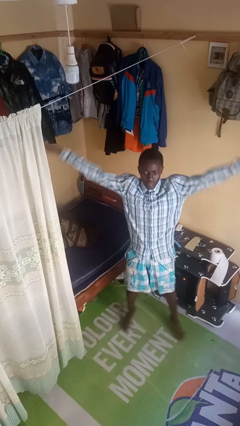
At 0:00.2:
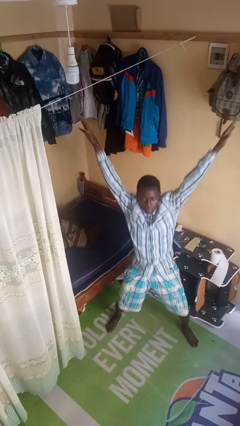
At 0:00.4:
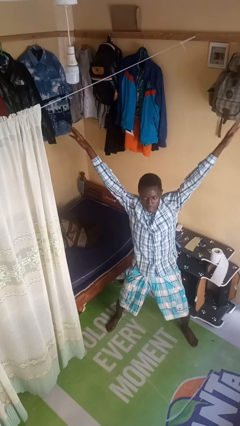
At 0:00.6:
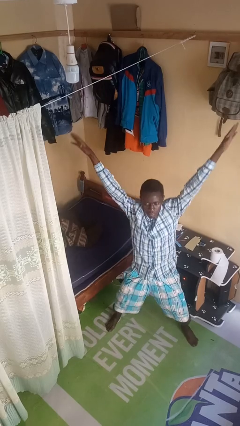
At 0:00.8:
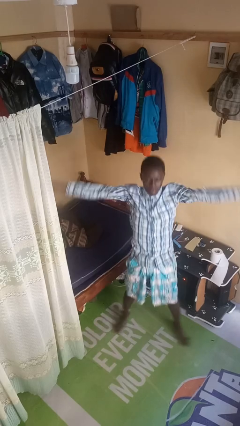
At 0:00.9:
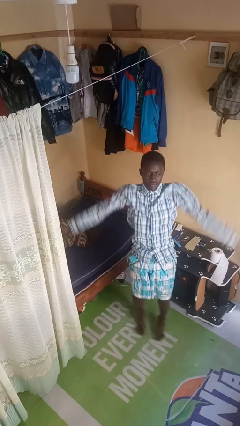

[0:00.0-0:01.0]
person exercises with jumping jacks

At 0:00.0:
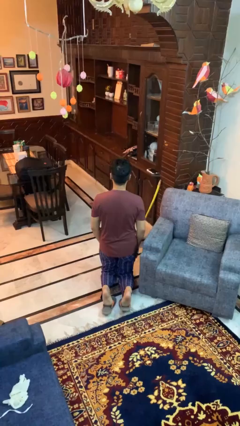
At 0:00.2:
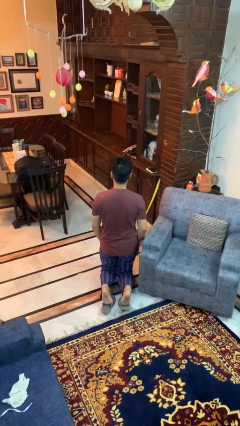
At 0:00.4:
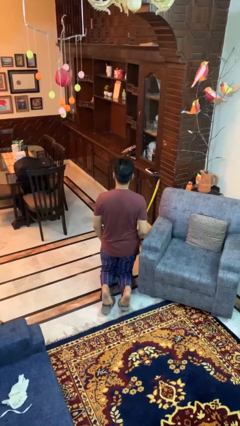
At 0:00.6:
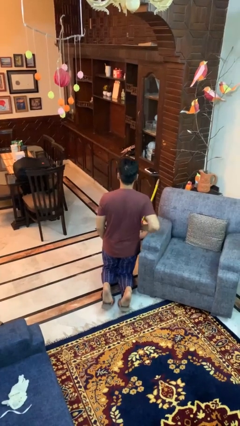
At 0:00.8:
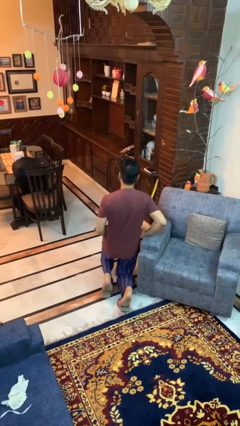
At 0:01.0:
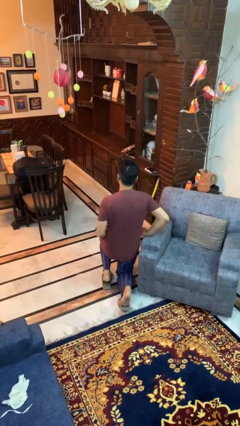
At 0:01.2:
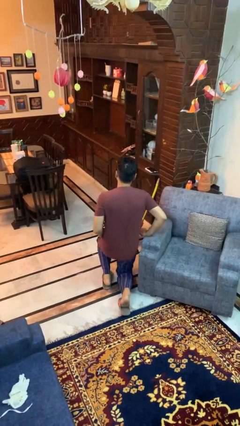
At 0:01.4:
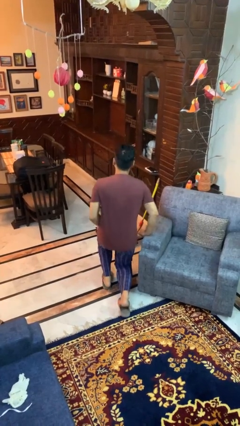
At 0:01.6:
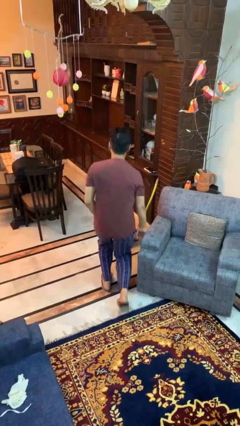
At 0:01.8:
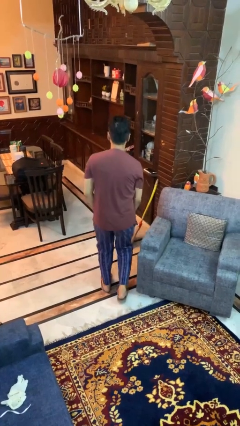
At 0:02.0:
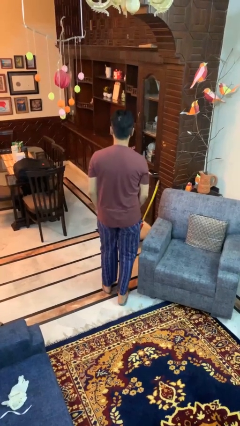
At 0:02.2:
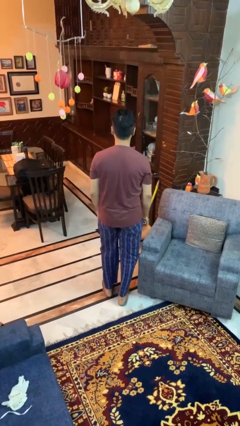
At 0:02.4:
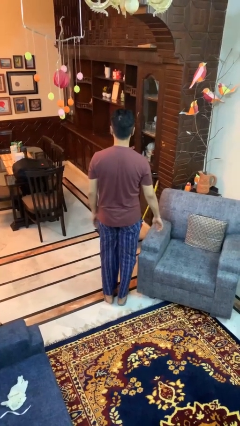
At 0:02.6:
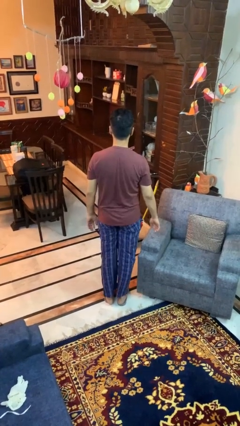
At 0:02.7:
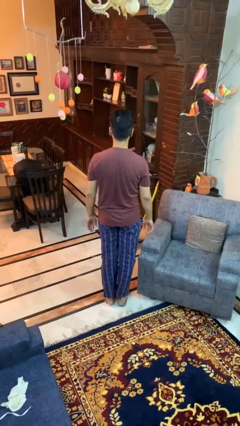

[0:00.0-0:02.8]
person stands up from floor

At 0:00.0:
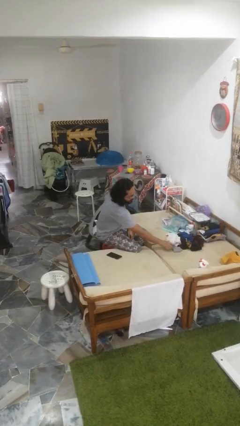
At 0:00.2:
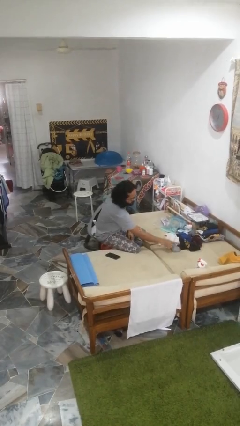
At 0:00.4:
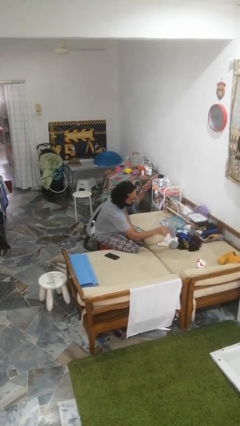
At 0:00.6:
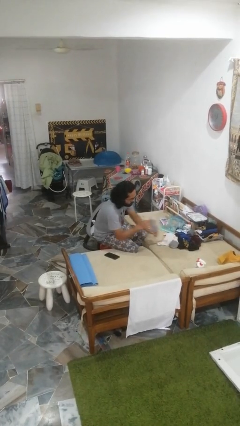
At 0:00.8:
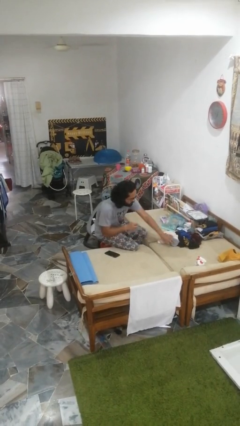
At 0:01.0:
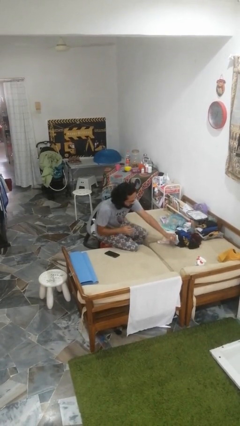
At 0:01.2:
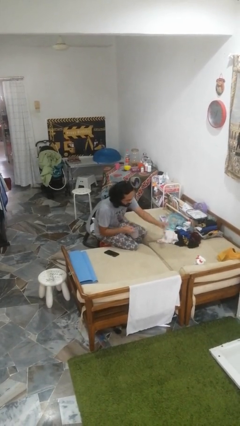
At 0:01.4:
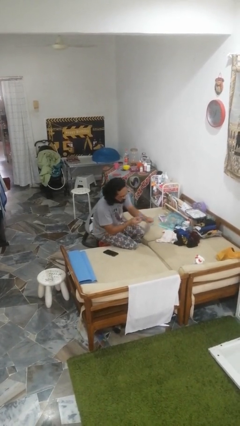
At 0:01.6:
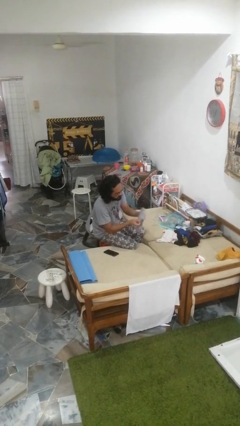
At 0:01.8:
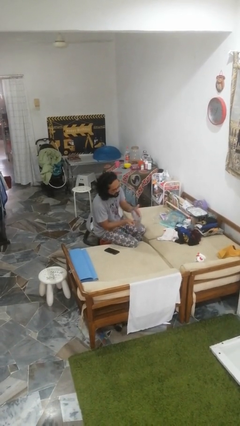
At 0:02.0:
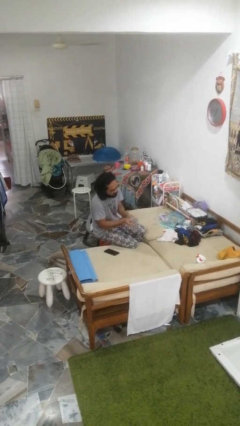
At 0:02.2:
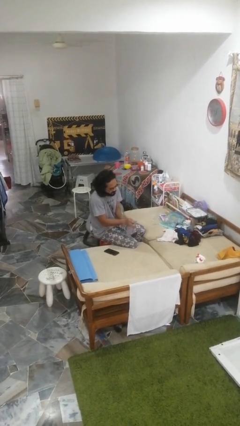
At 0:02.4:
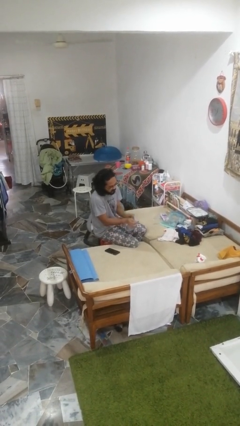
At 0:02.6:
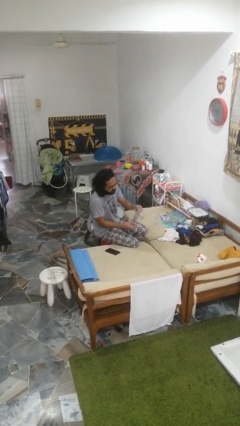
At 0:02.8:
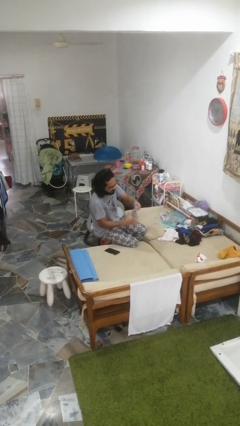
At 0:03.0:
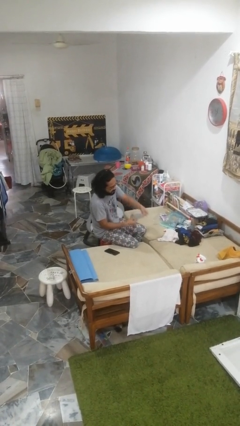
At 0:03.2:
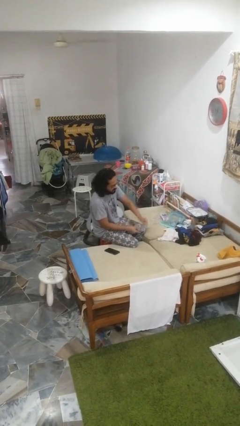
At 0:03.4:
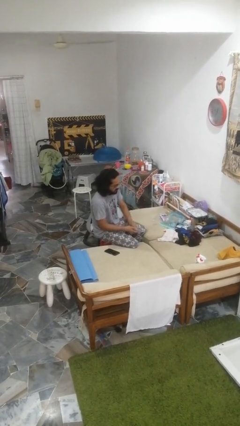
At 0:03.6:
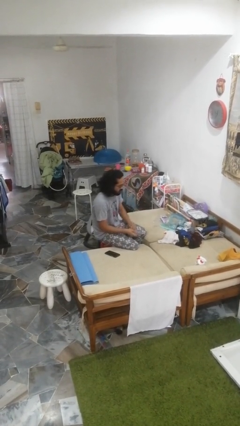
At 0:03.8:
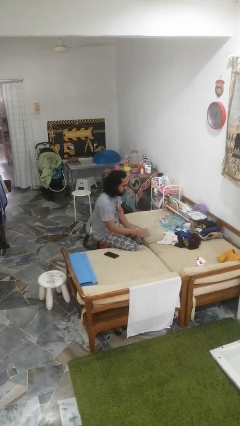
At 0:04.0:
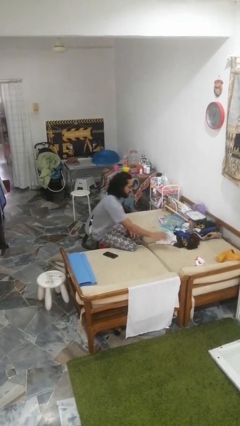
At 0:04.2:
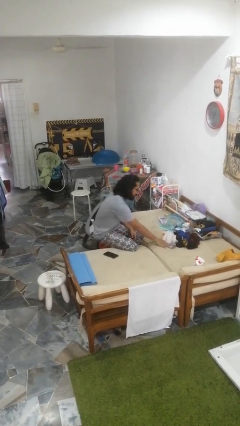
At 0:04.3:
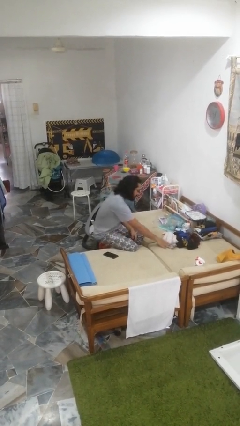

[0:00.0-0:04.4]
person folds socks

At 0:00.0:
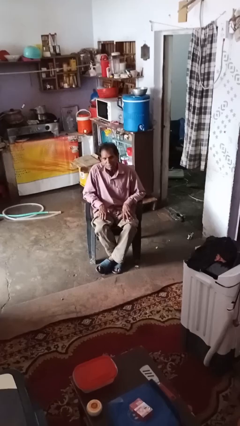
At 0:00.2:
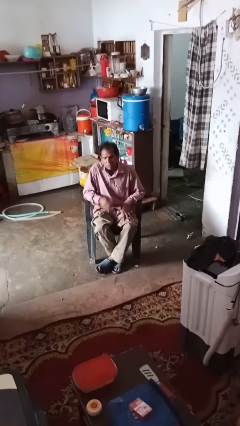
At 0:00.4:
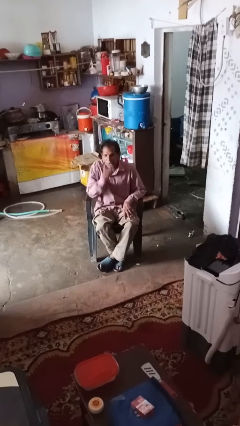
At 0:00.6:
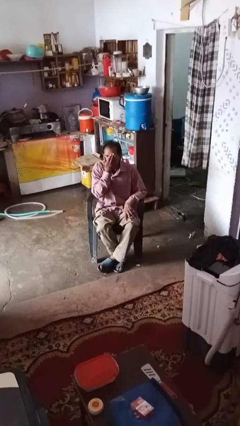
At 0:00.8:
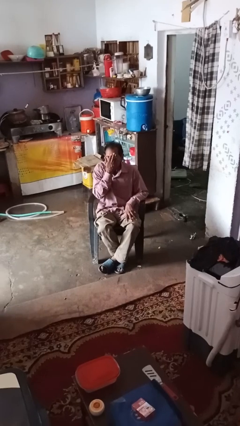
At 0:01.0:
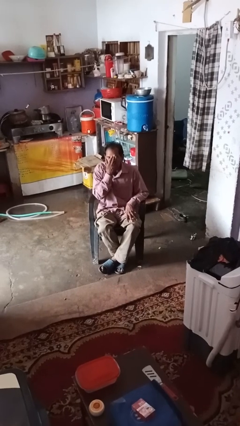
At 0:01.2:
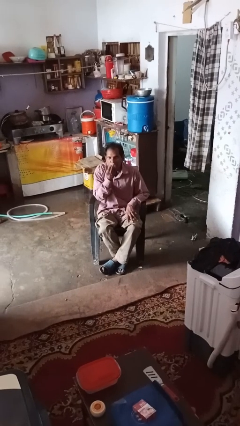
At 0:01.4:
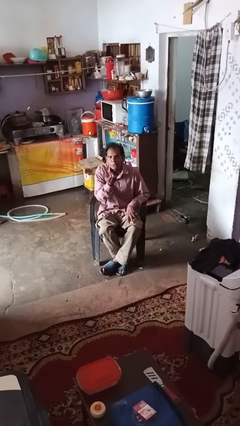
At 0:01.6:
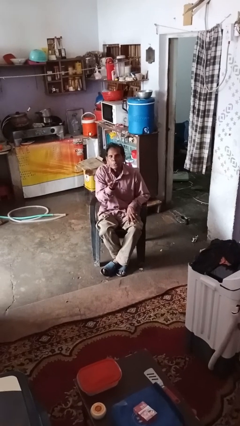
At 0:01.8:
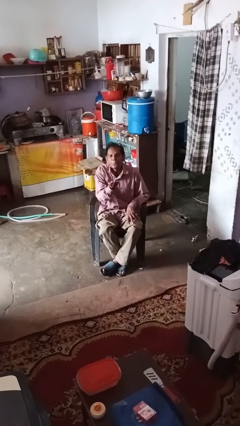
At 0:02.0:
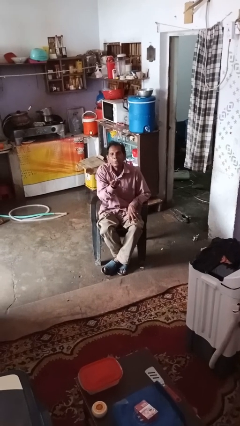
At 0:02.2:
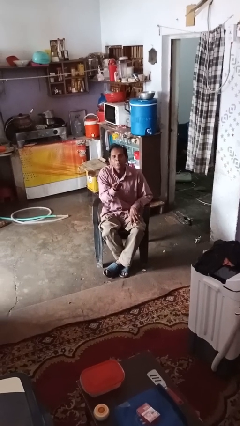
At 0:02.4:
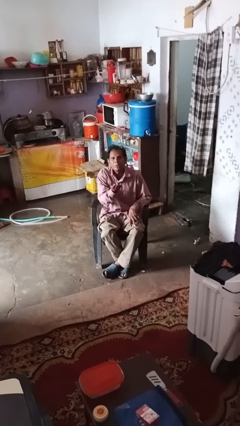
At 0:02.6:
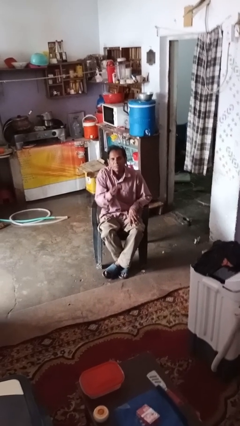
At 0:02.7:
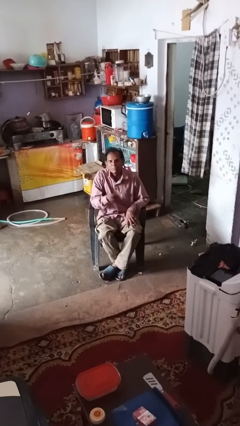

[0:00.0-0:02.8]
person gestures blow kiss

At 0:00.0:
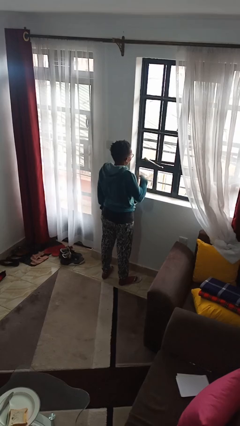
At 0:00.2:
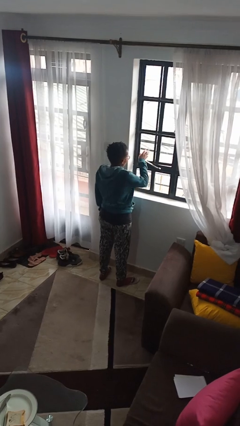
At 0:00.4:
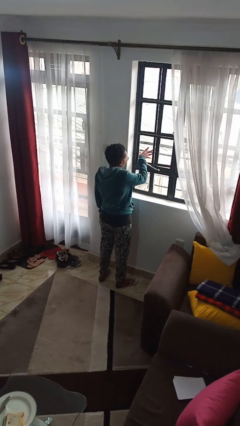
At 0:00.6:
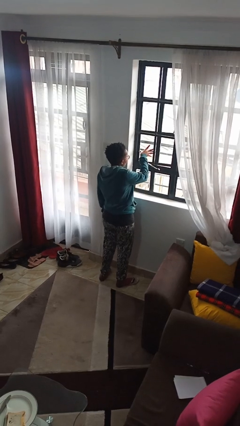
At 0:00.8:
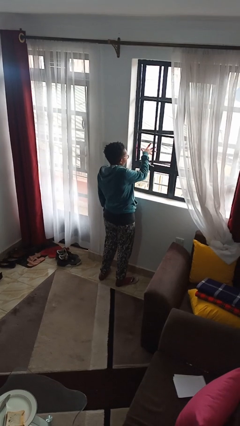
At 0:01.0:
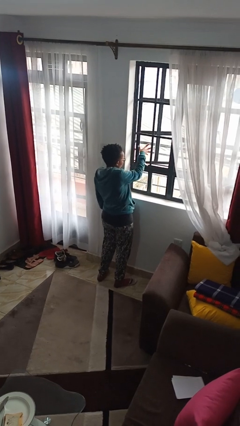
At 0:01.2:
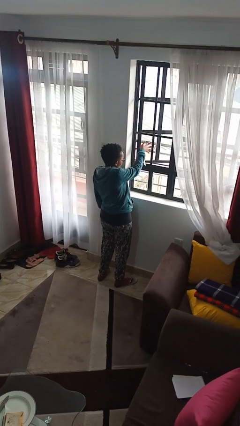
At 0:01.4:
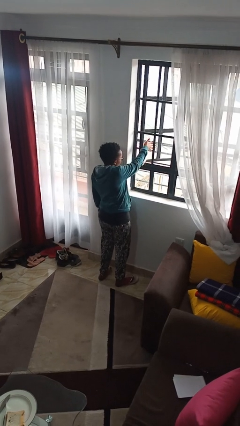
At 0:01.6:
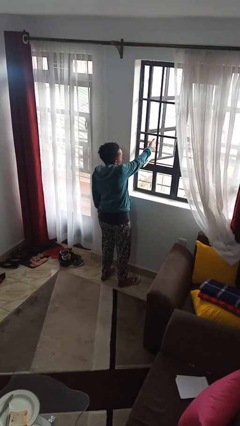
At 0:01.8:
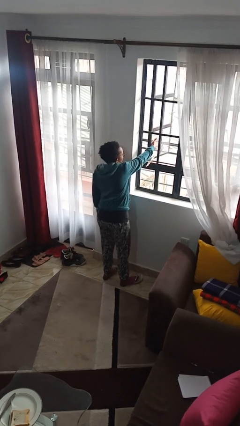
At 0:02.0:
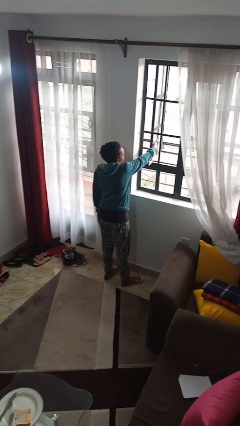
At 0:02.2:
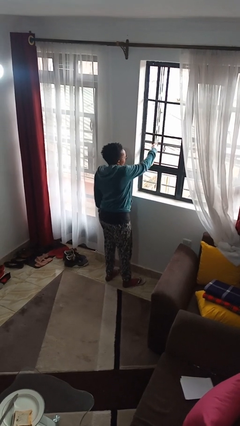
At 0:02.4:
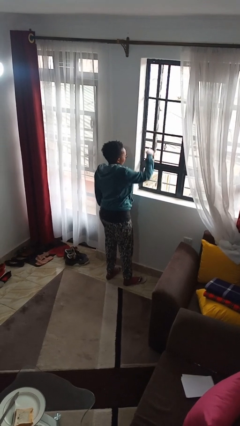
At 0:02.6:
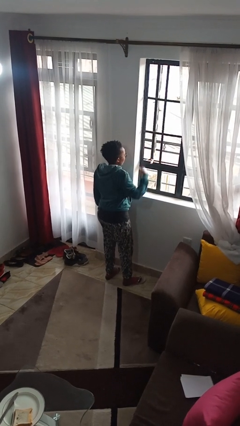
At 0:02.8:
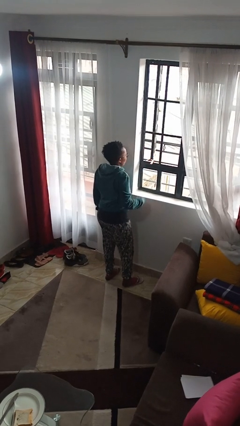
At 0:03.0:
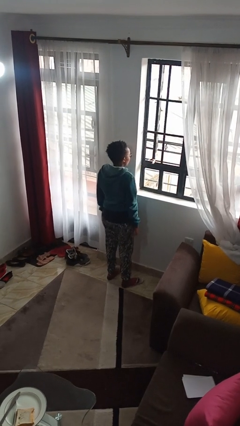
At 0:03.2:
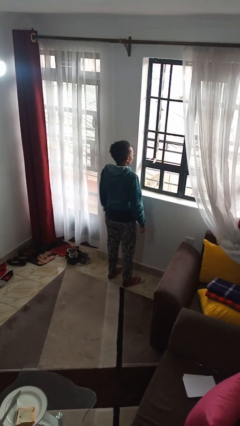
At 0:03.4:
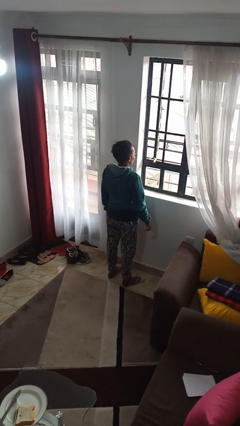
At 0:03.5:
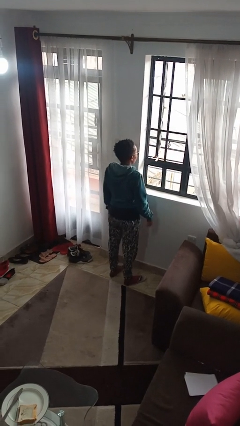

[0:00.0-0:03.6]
person opens home window

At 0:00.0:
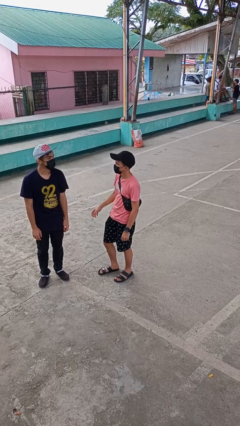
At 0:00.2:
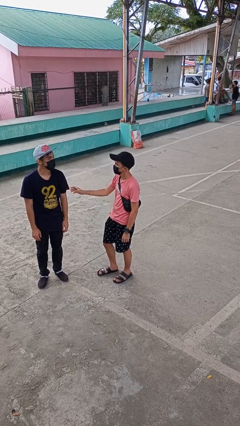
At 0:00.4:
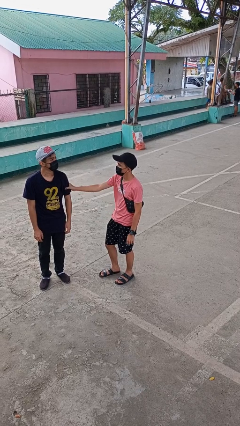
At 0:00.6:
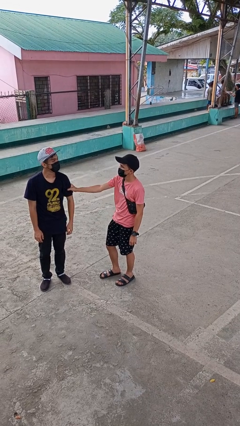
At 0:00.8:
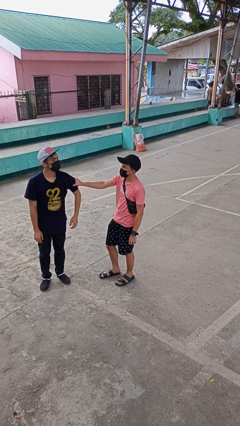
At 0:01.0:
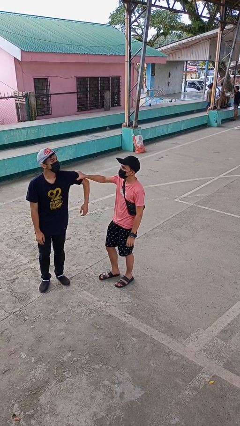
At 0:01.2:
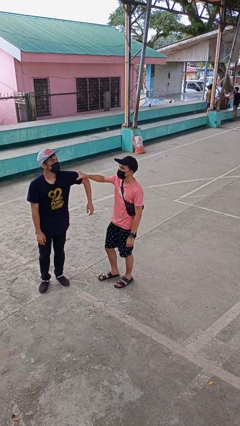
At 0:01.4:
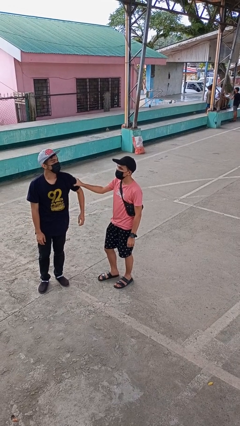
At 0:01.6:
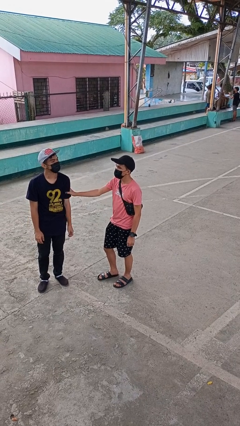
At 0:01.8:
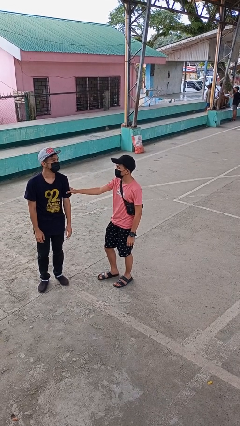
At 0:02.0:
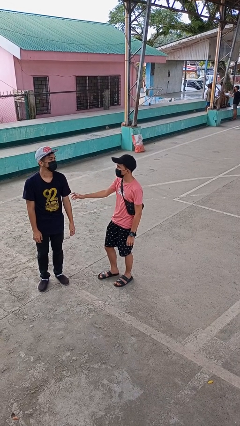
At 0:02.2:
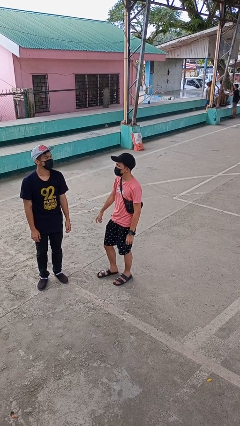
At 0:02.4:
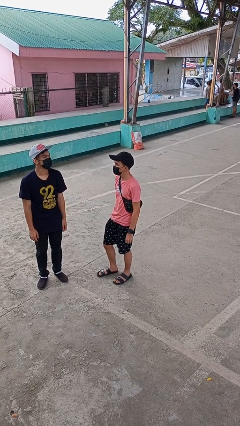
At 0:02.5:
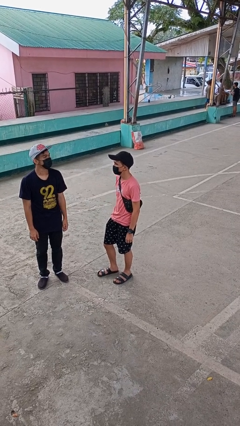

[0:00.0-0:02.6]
person grabs person by bicep

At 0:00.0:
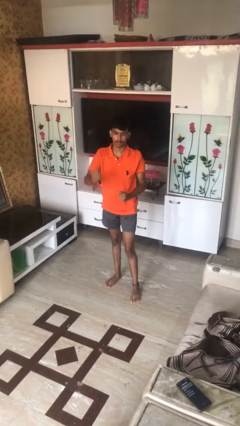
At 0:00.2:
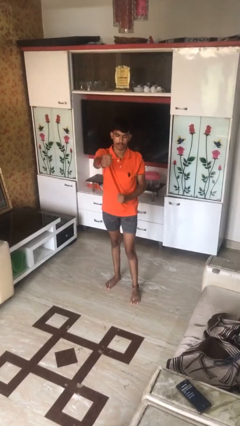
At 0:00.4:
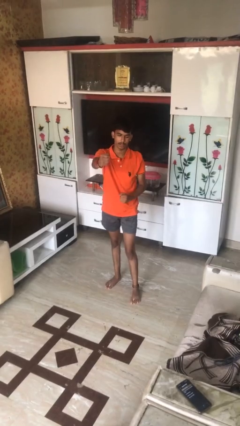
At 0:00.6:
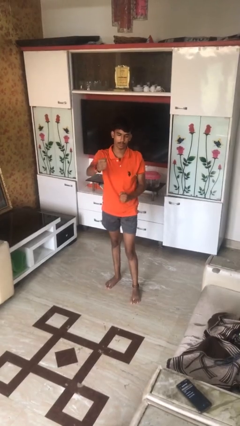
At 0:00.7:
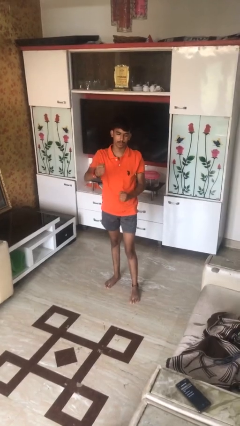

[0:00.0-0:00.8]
person punches
